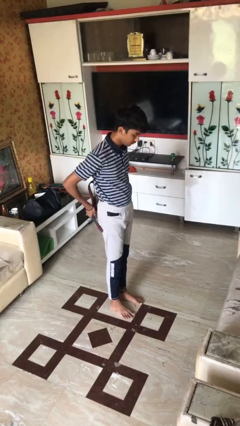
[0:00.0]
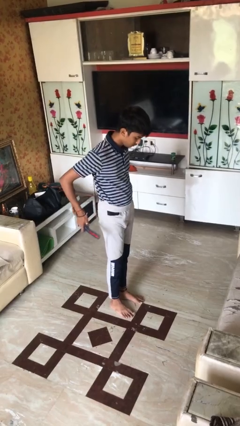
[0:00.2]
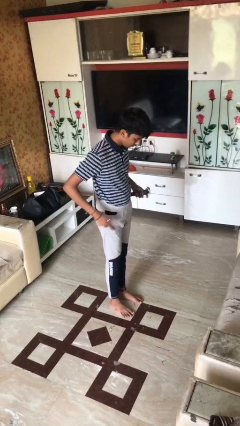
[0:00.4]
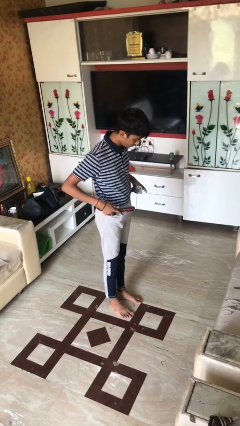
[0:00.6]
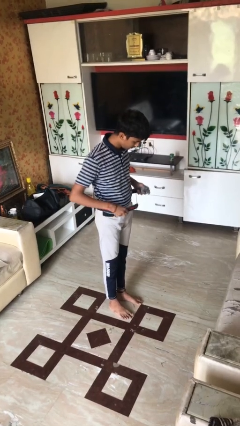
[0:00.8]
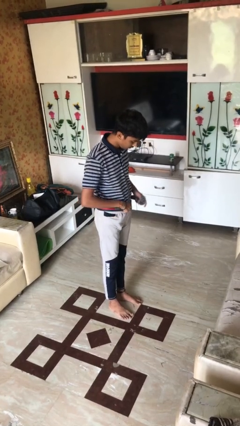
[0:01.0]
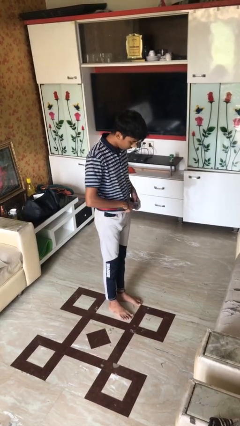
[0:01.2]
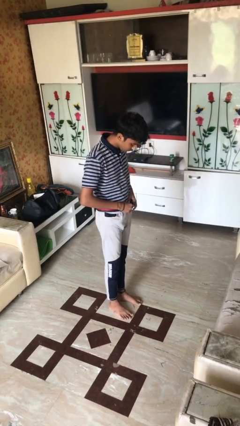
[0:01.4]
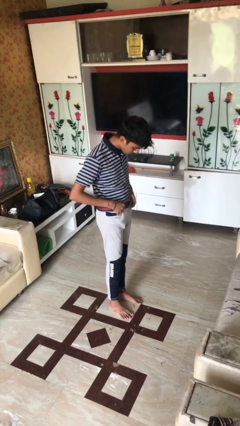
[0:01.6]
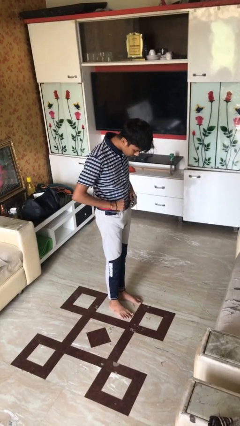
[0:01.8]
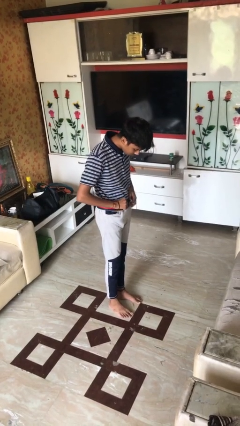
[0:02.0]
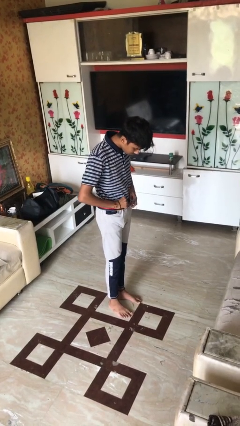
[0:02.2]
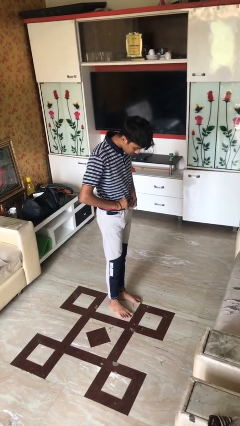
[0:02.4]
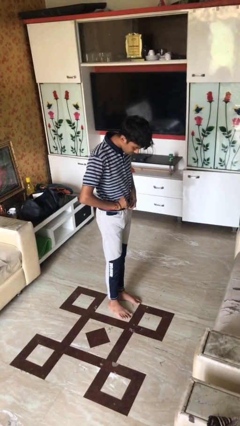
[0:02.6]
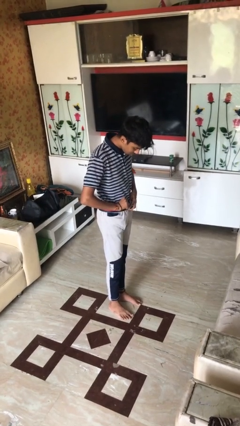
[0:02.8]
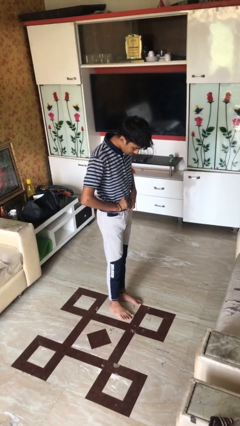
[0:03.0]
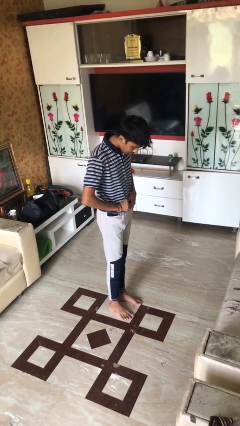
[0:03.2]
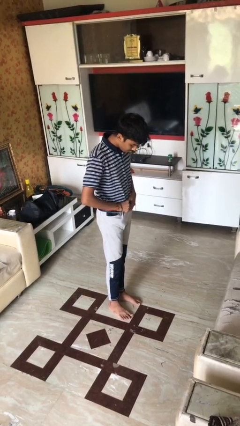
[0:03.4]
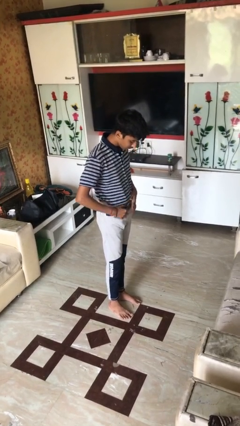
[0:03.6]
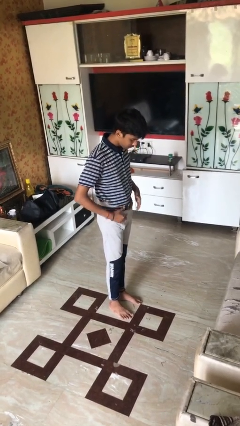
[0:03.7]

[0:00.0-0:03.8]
person puts on belt

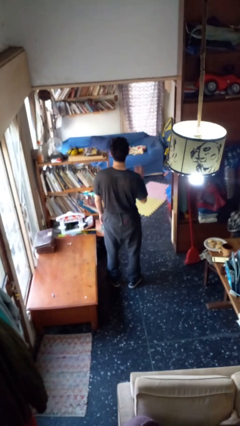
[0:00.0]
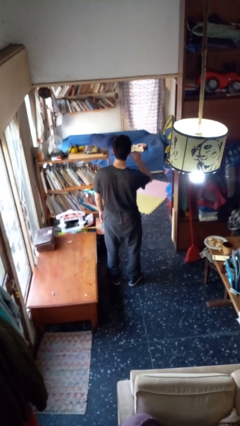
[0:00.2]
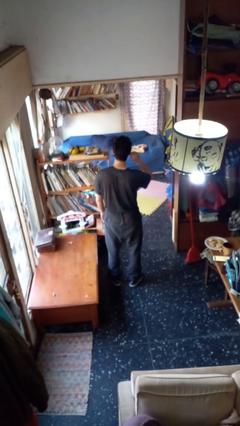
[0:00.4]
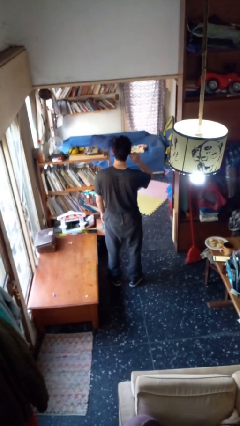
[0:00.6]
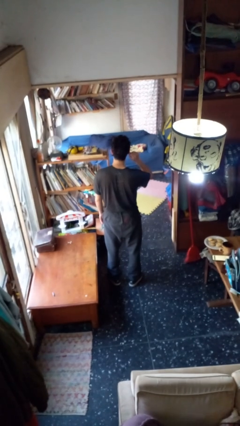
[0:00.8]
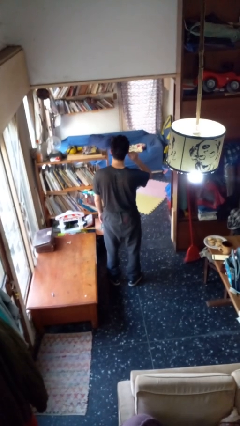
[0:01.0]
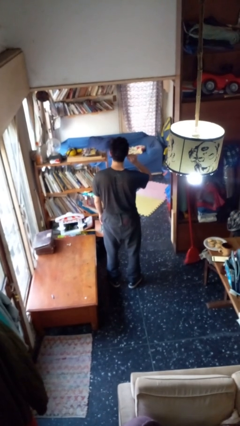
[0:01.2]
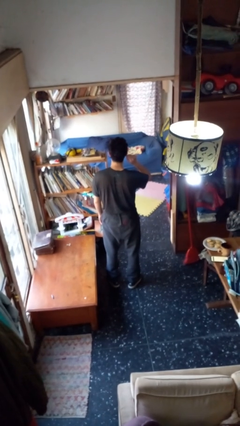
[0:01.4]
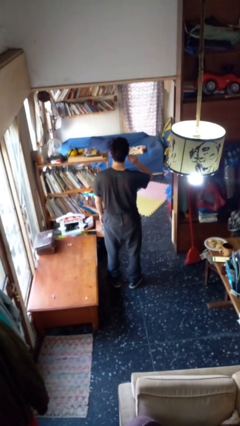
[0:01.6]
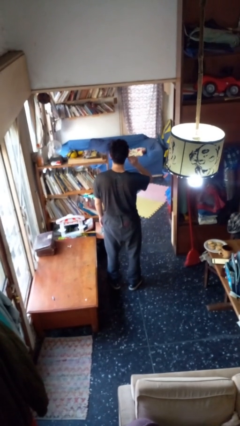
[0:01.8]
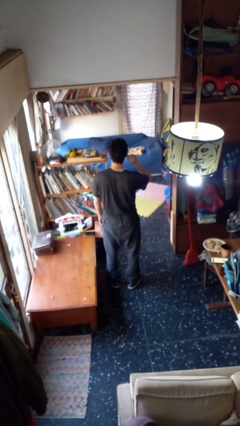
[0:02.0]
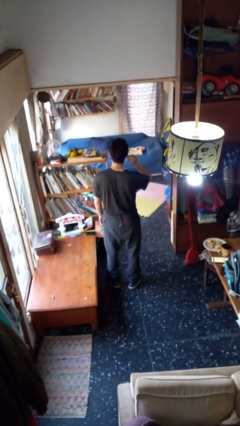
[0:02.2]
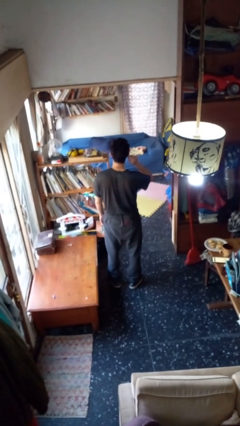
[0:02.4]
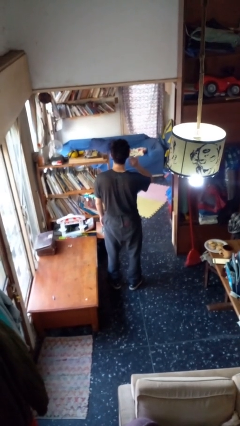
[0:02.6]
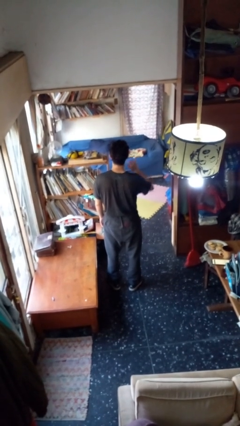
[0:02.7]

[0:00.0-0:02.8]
person touches earlobe

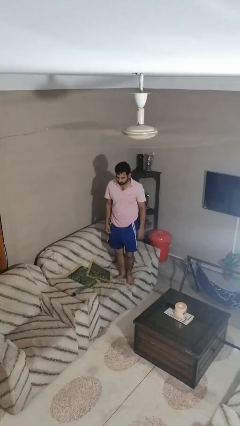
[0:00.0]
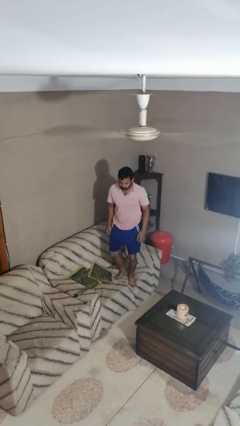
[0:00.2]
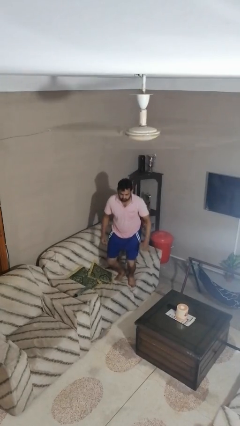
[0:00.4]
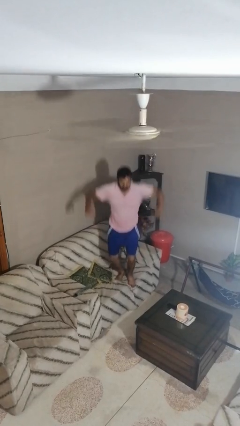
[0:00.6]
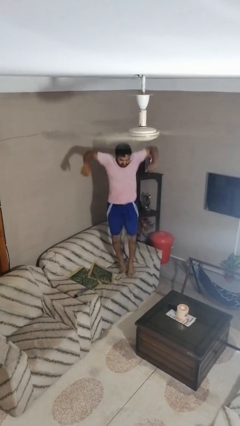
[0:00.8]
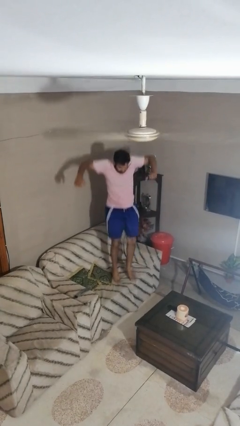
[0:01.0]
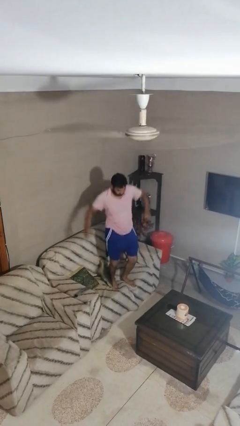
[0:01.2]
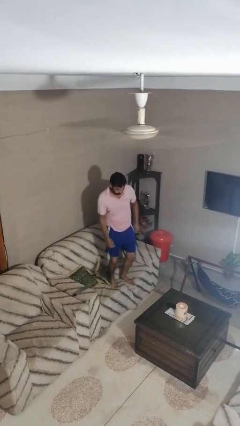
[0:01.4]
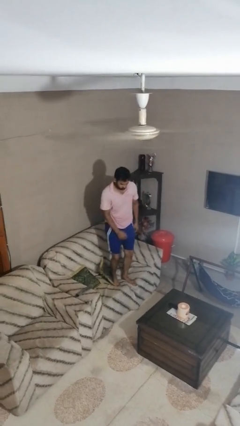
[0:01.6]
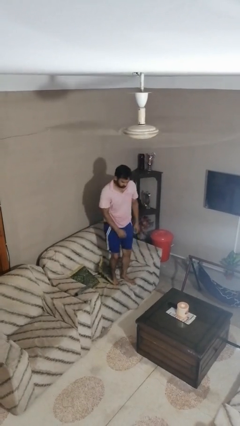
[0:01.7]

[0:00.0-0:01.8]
person jumps on couch

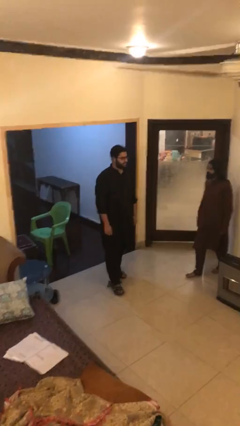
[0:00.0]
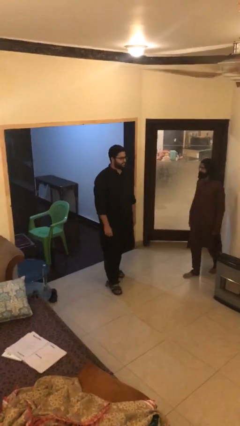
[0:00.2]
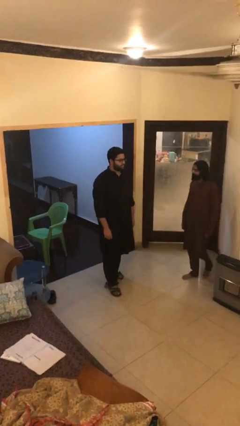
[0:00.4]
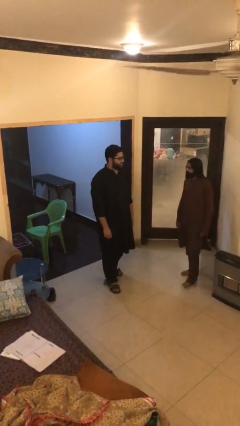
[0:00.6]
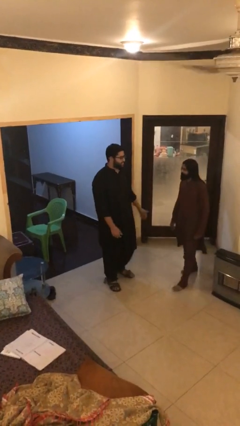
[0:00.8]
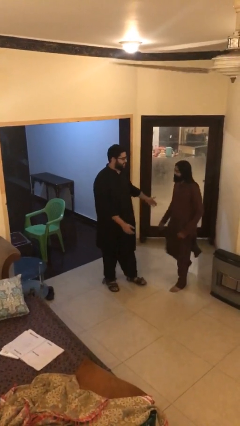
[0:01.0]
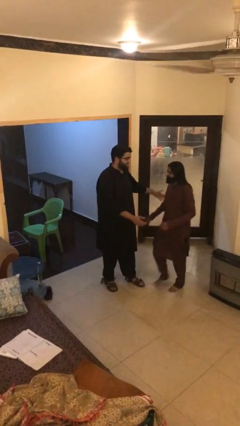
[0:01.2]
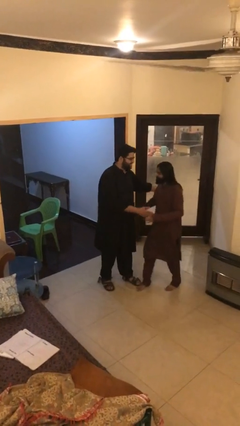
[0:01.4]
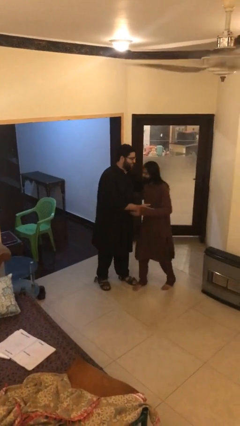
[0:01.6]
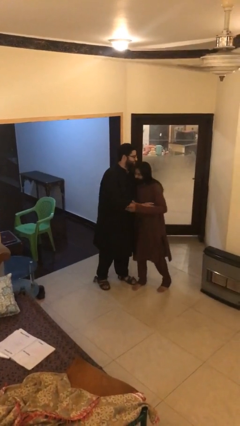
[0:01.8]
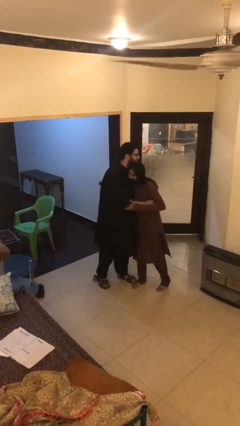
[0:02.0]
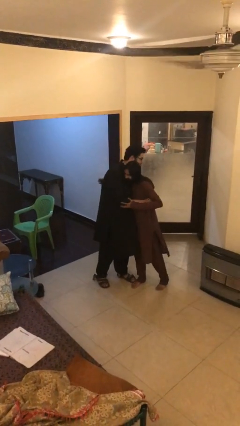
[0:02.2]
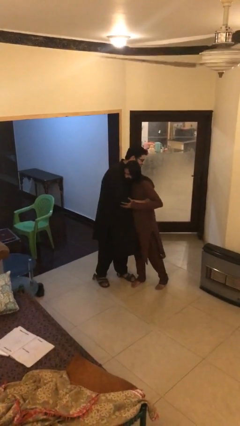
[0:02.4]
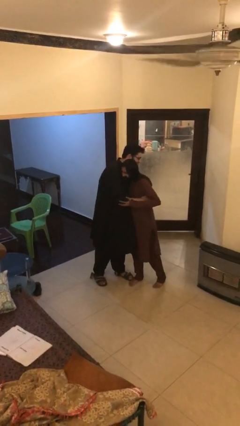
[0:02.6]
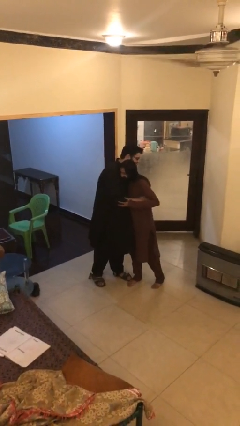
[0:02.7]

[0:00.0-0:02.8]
person embraces person

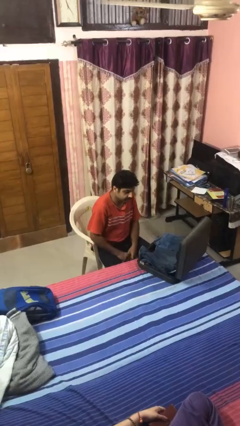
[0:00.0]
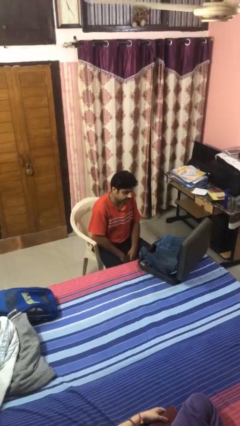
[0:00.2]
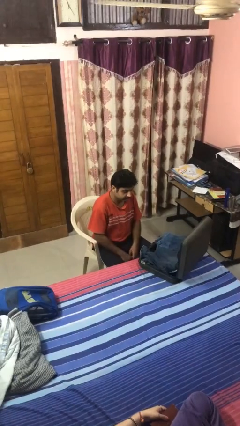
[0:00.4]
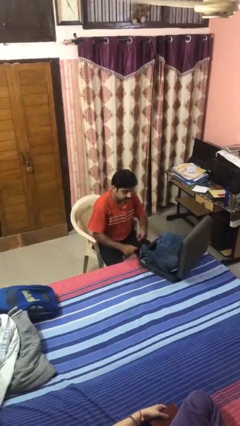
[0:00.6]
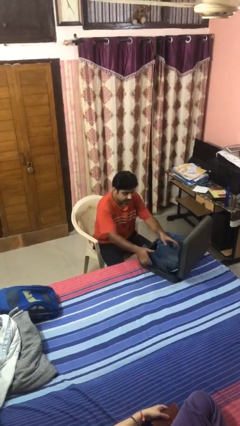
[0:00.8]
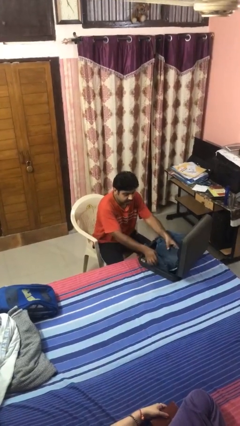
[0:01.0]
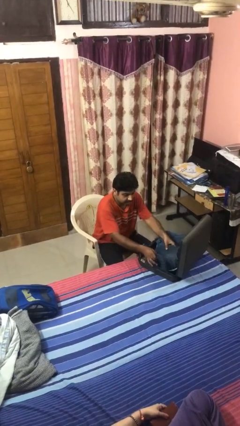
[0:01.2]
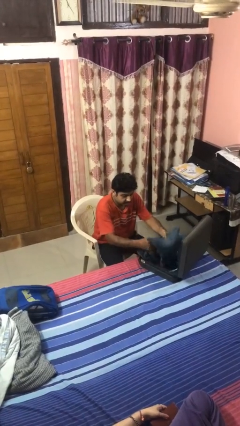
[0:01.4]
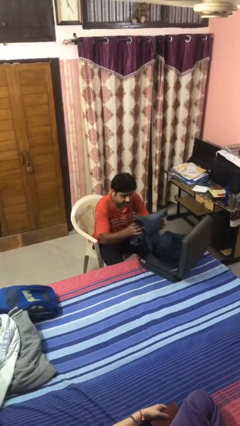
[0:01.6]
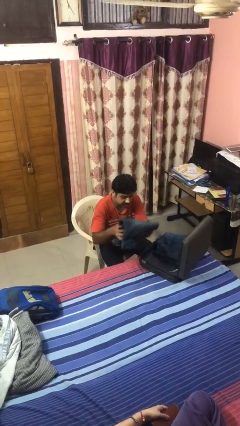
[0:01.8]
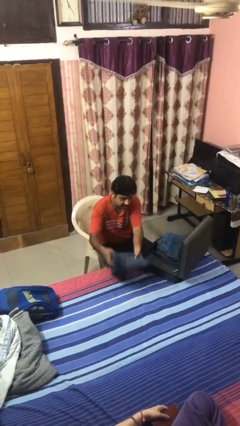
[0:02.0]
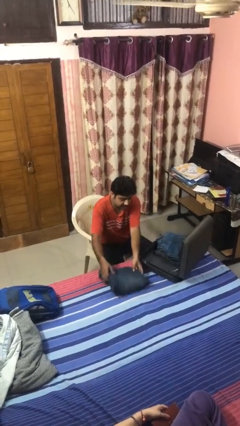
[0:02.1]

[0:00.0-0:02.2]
person unloads clothes from suitcase

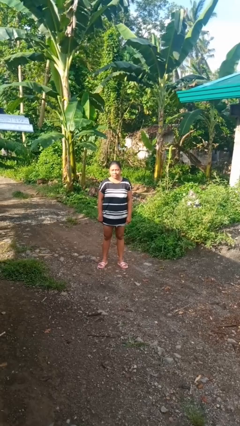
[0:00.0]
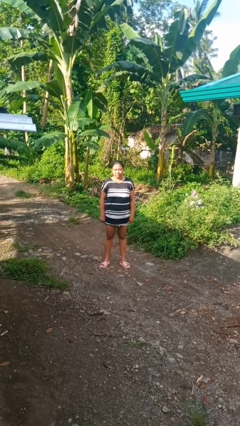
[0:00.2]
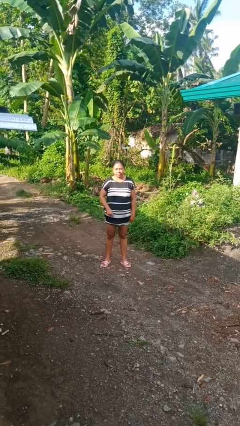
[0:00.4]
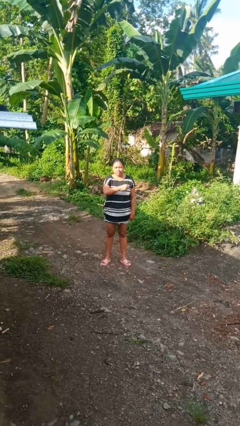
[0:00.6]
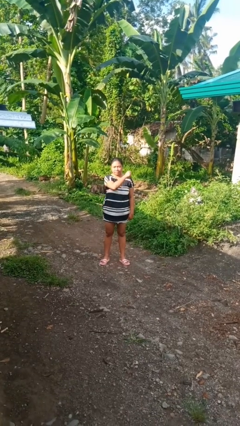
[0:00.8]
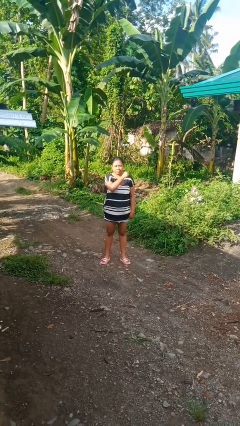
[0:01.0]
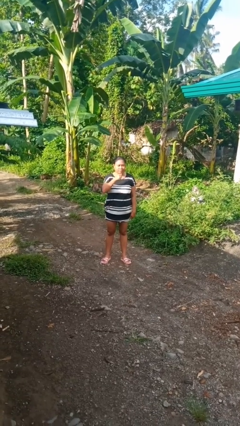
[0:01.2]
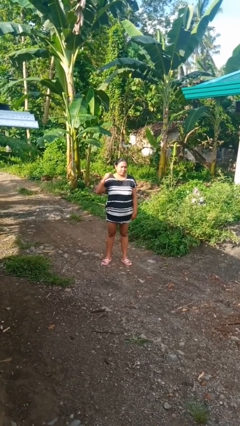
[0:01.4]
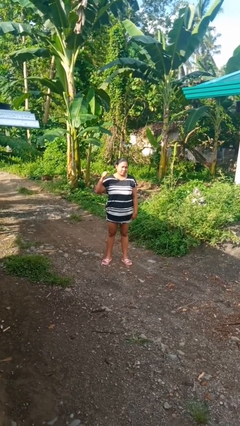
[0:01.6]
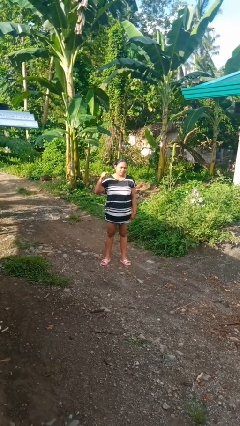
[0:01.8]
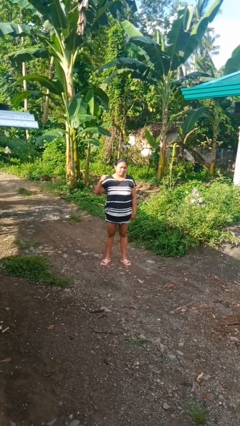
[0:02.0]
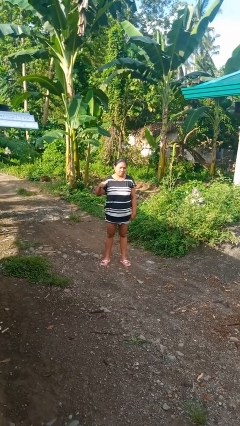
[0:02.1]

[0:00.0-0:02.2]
person gestures cut

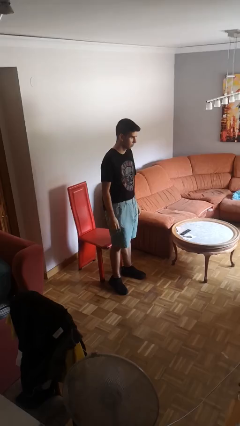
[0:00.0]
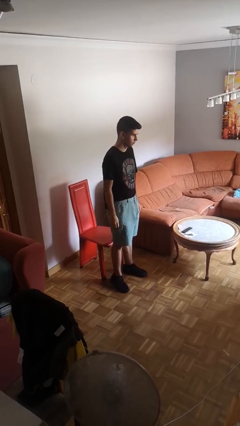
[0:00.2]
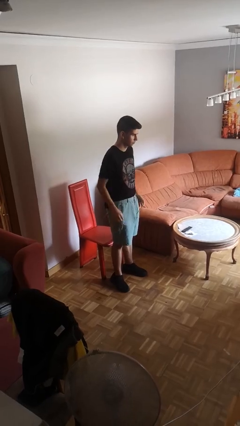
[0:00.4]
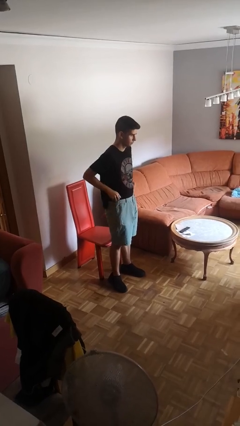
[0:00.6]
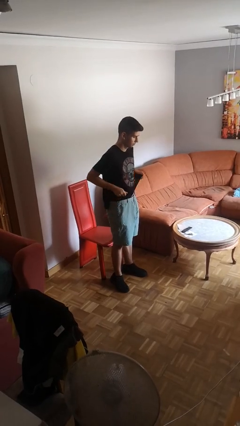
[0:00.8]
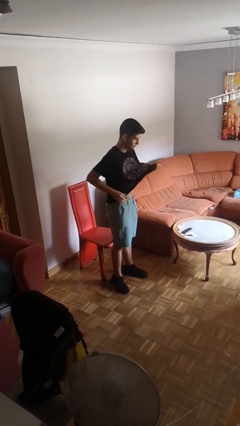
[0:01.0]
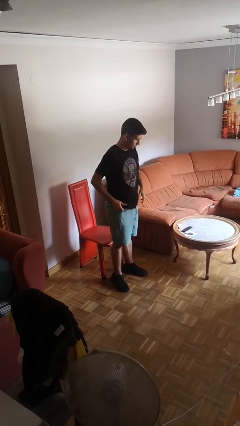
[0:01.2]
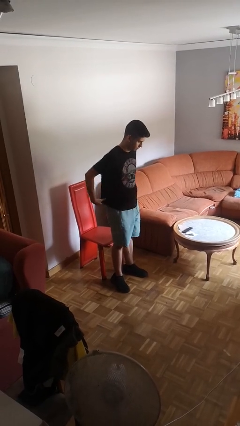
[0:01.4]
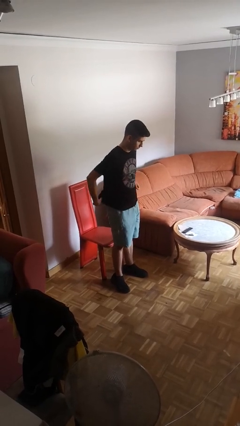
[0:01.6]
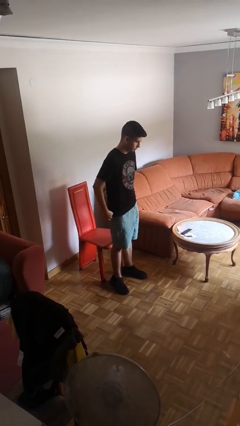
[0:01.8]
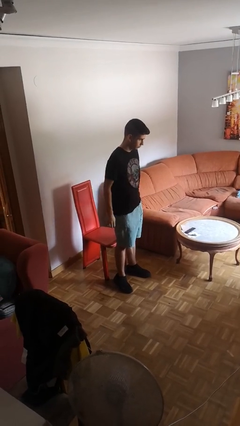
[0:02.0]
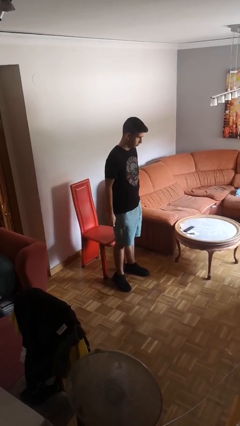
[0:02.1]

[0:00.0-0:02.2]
person untucks shirt
